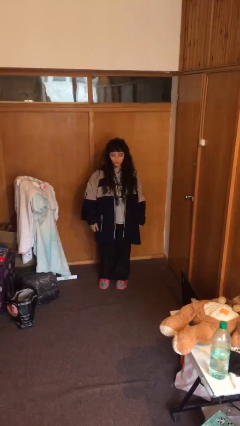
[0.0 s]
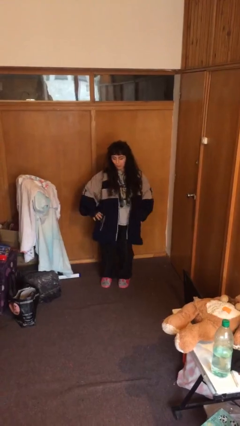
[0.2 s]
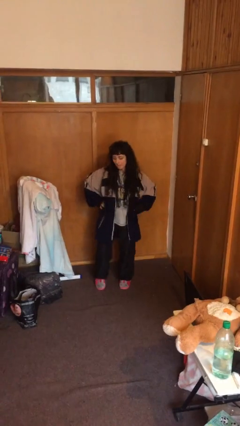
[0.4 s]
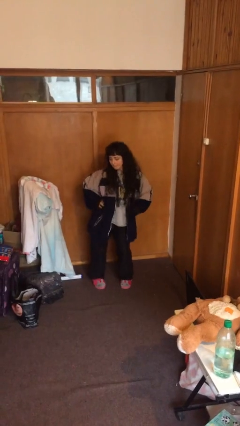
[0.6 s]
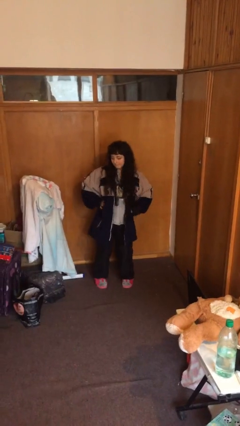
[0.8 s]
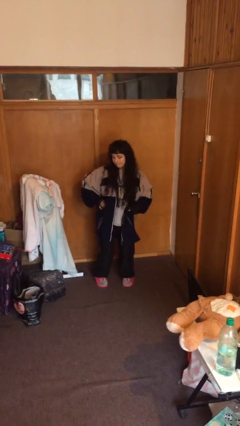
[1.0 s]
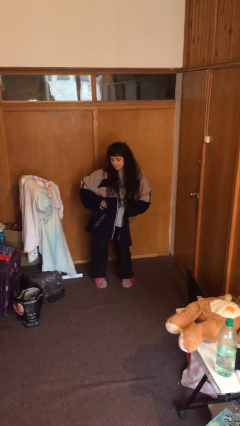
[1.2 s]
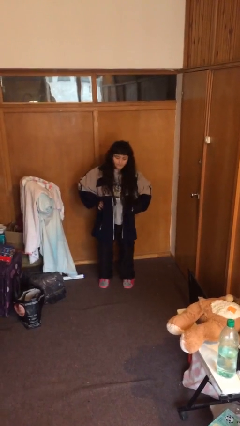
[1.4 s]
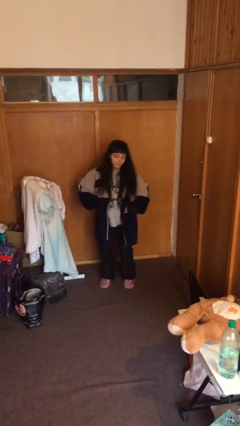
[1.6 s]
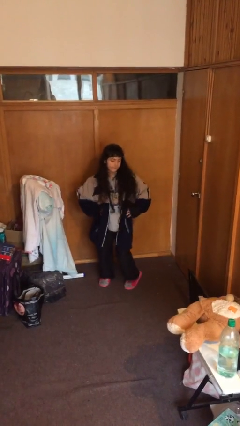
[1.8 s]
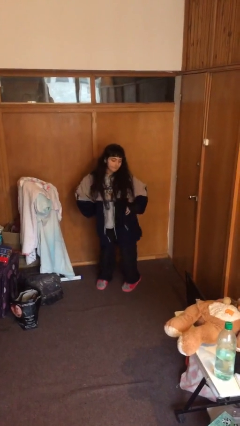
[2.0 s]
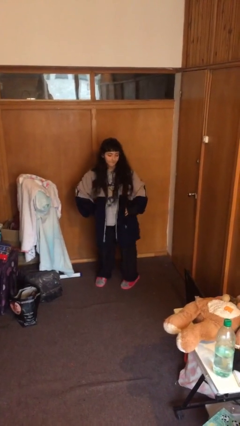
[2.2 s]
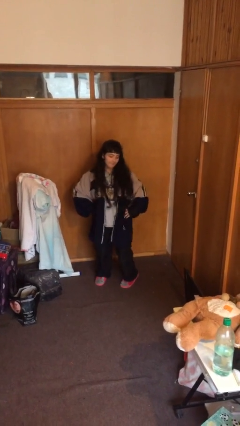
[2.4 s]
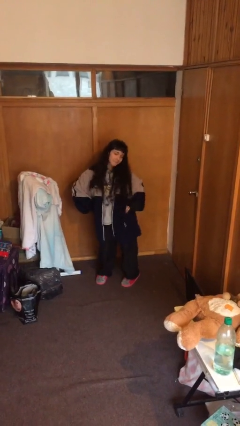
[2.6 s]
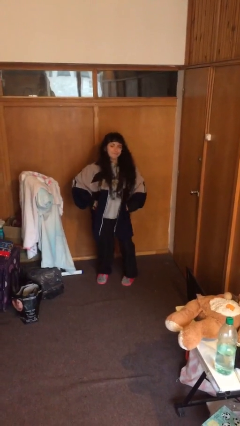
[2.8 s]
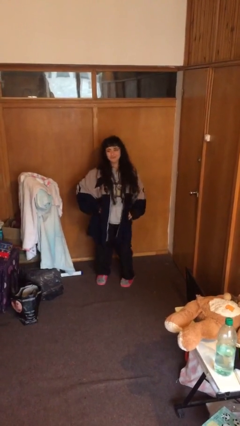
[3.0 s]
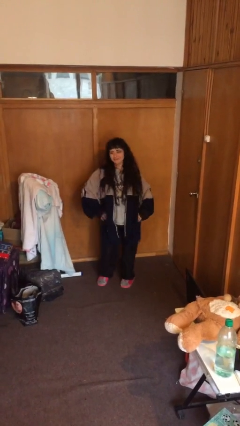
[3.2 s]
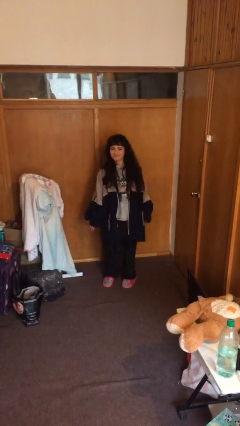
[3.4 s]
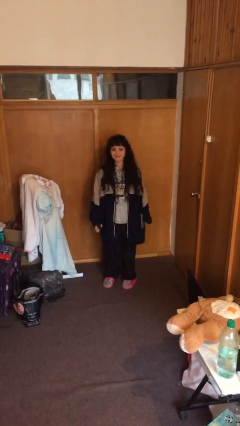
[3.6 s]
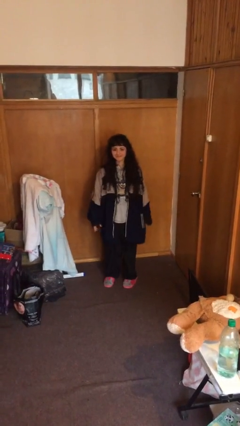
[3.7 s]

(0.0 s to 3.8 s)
person dances in place

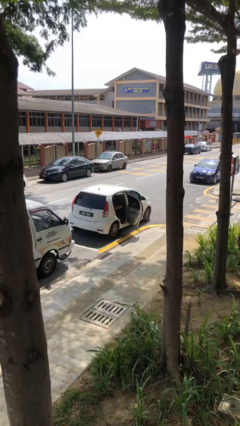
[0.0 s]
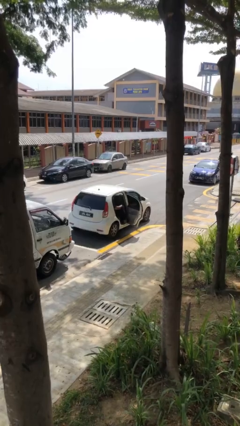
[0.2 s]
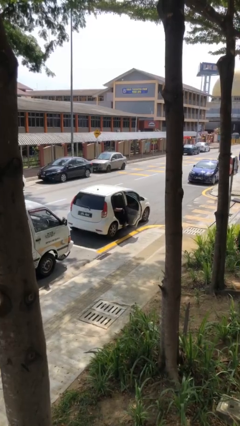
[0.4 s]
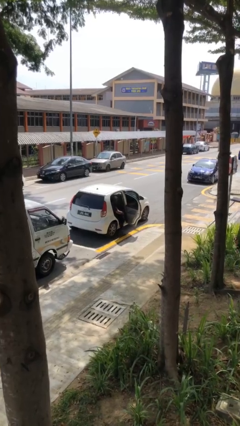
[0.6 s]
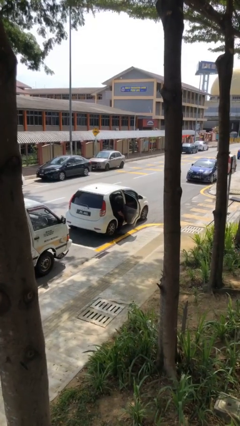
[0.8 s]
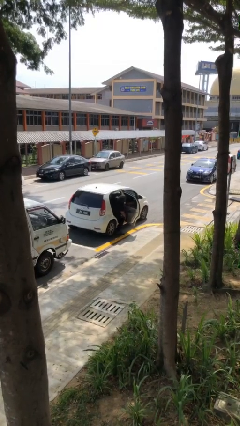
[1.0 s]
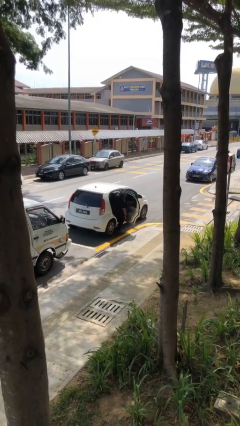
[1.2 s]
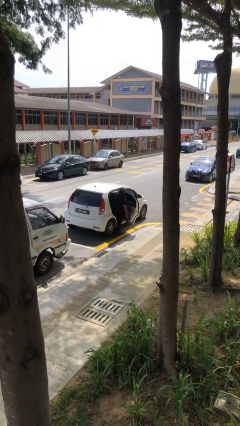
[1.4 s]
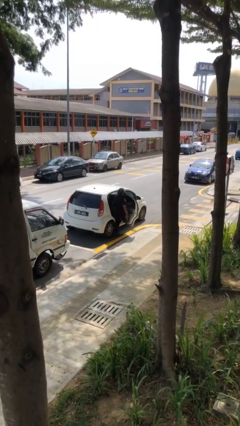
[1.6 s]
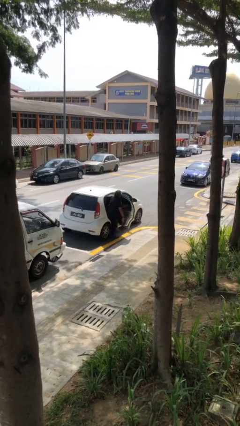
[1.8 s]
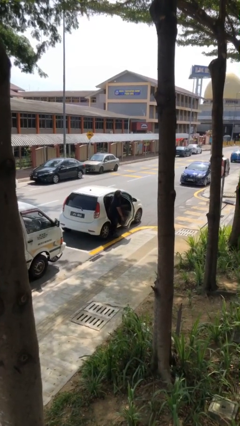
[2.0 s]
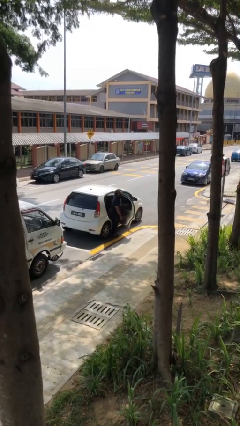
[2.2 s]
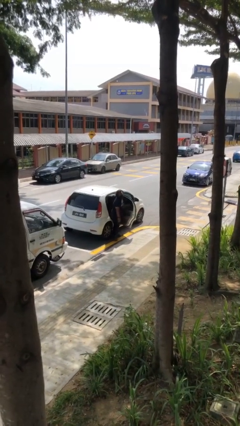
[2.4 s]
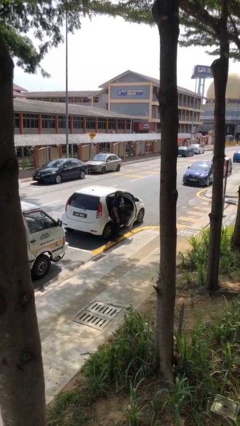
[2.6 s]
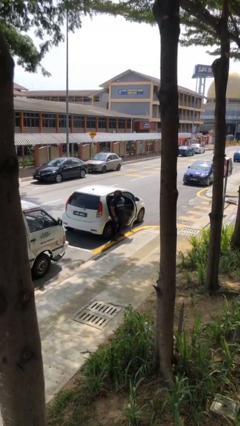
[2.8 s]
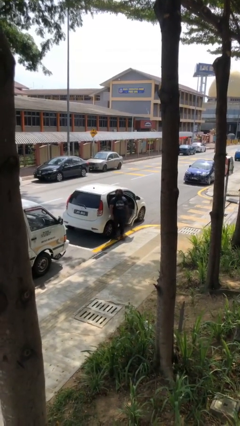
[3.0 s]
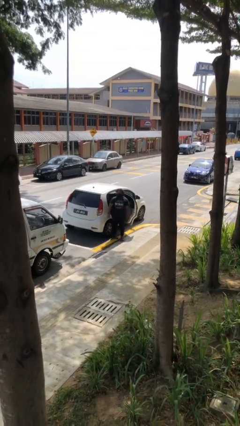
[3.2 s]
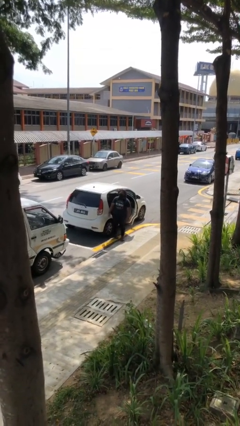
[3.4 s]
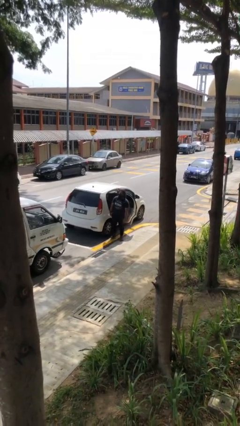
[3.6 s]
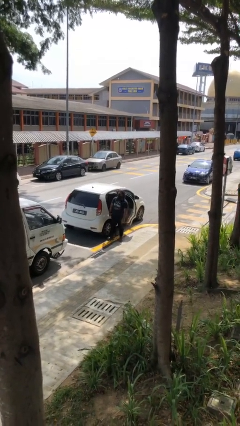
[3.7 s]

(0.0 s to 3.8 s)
person exits car

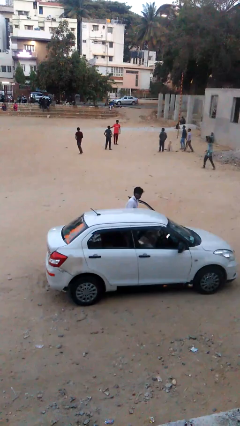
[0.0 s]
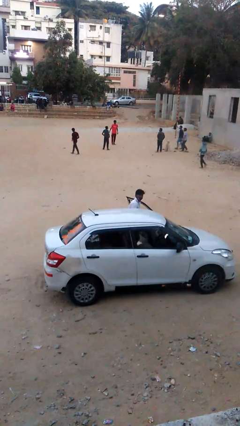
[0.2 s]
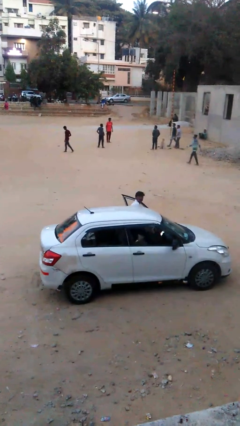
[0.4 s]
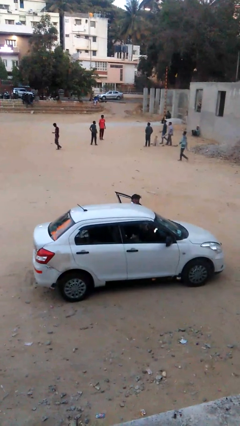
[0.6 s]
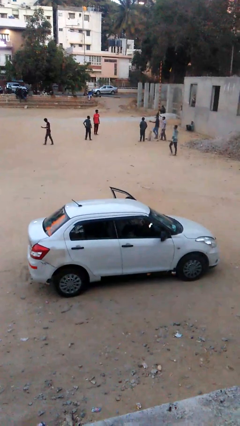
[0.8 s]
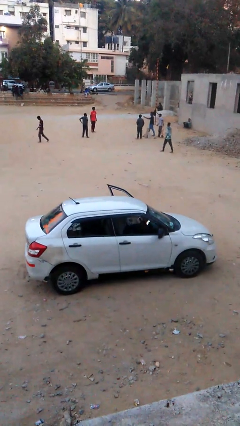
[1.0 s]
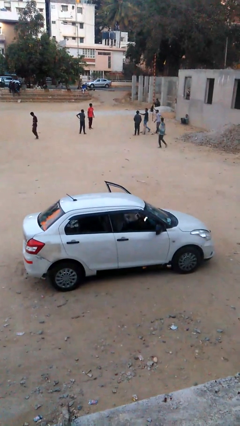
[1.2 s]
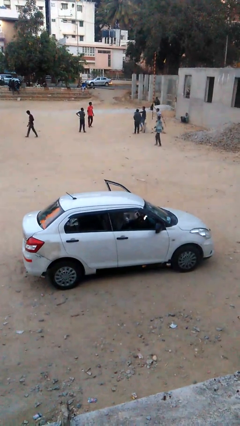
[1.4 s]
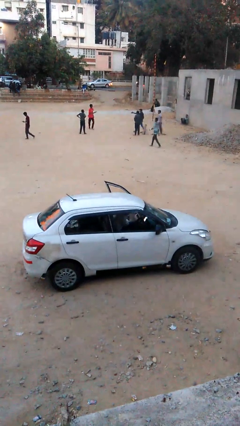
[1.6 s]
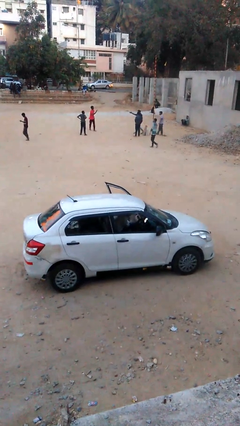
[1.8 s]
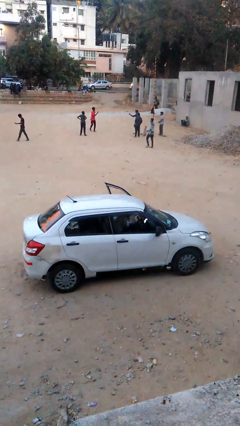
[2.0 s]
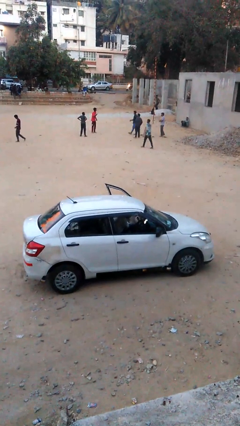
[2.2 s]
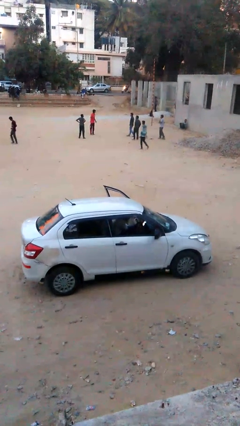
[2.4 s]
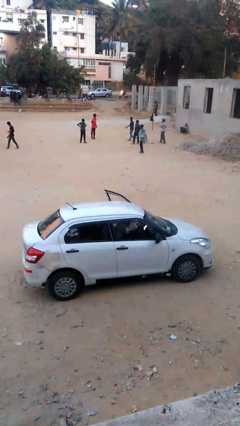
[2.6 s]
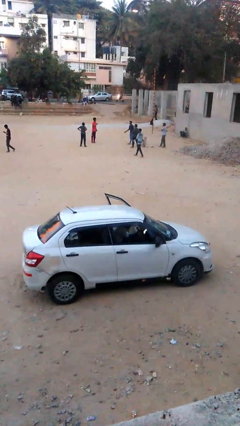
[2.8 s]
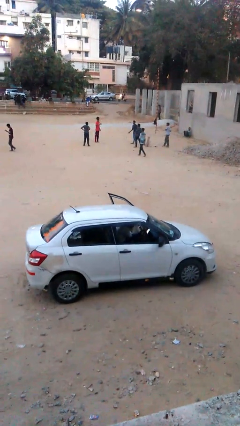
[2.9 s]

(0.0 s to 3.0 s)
person enters car

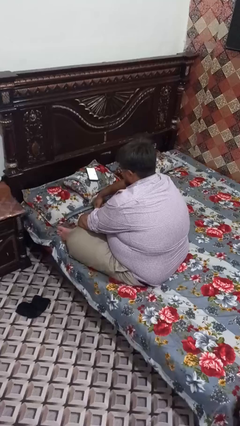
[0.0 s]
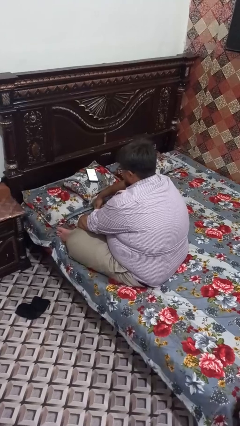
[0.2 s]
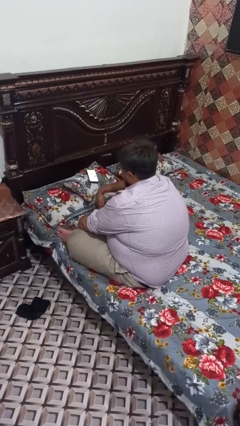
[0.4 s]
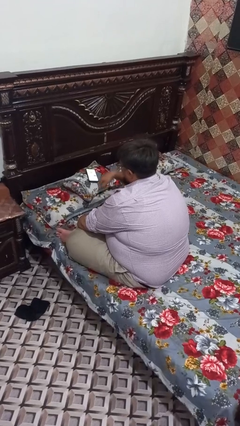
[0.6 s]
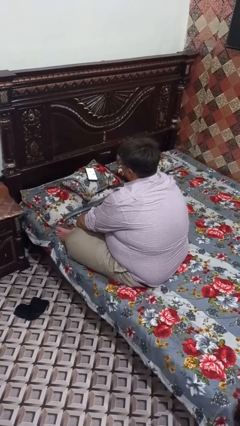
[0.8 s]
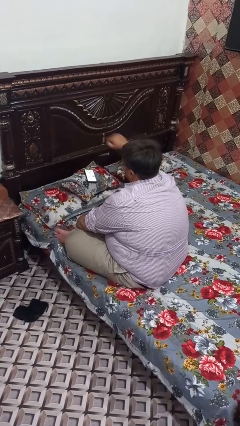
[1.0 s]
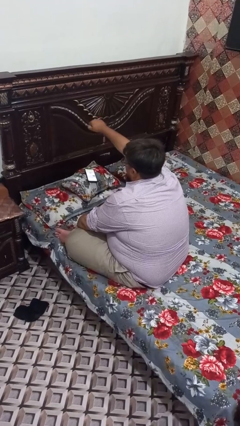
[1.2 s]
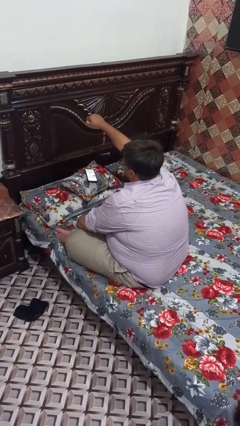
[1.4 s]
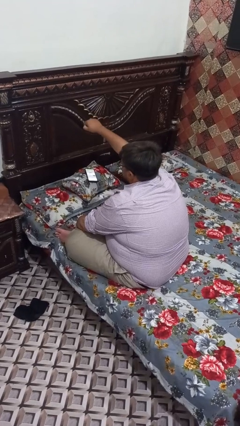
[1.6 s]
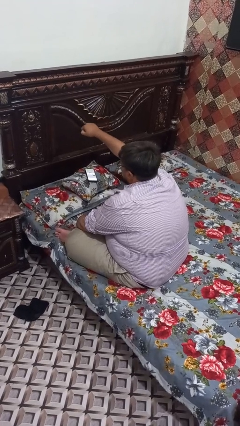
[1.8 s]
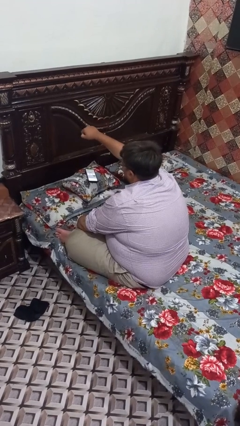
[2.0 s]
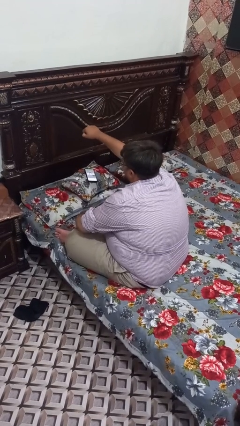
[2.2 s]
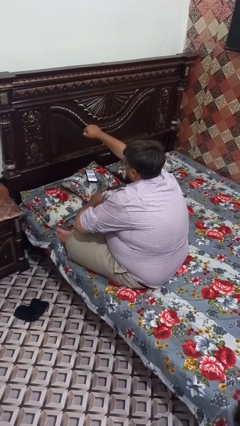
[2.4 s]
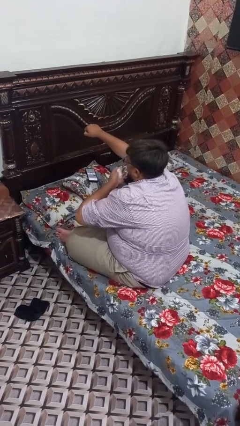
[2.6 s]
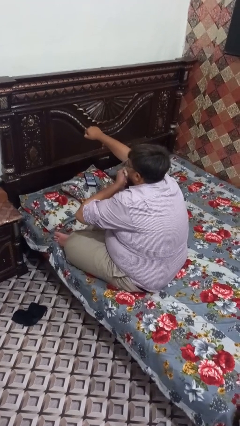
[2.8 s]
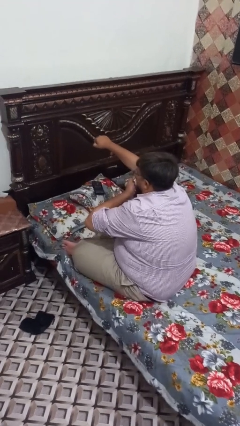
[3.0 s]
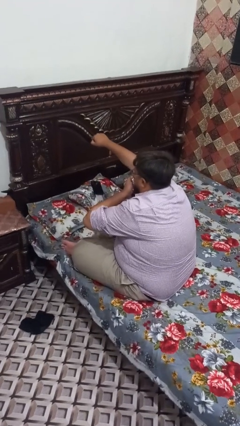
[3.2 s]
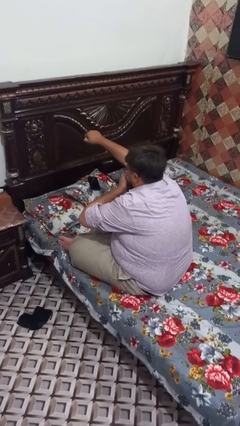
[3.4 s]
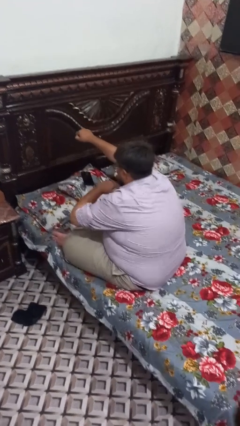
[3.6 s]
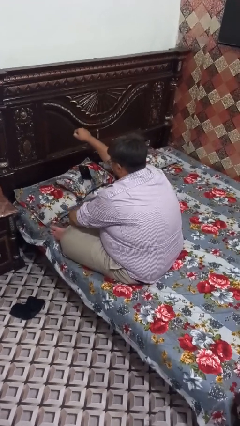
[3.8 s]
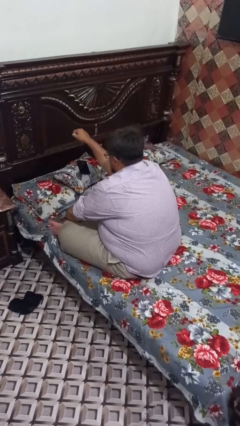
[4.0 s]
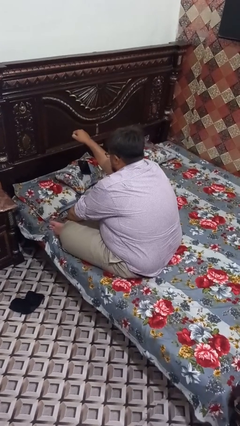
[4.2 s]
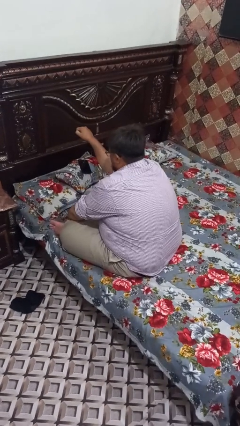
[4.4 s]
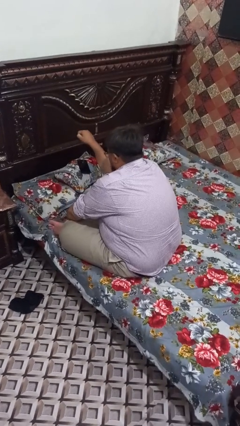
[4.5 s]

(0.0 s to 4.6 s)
person punches

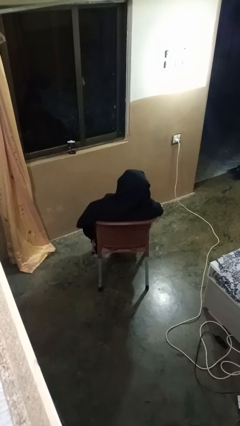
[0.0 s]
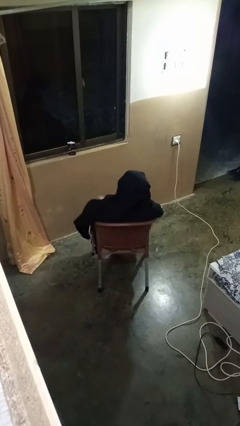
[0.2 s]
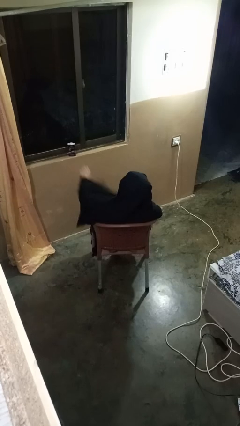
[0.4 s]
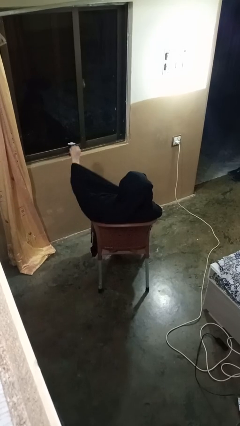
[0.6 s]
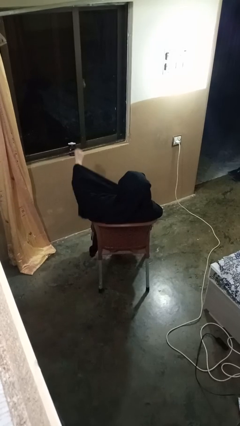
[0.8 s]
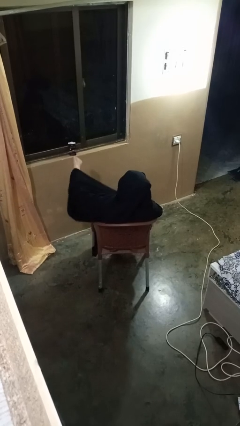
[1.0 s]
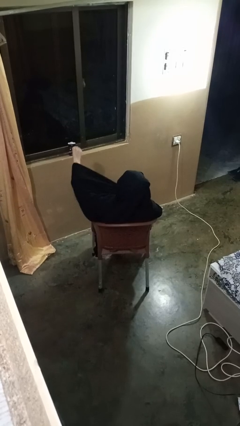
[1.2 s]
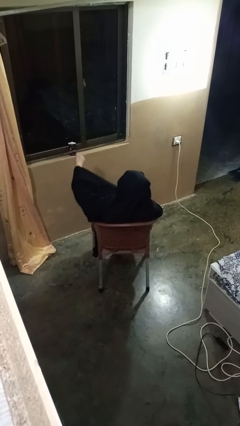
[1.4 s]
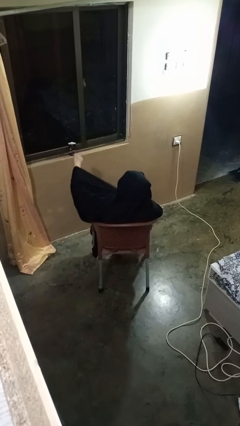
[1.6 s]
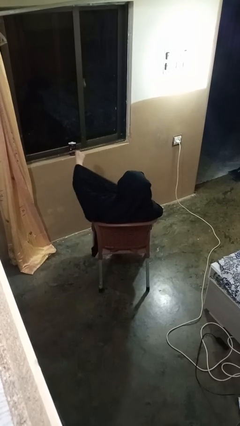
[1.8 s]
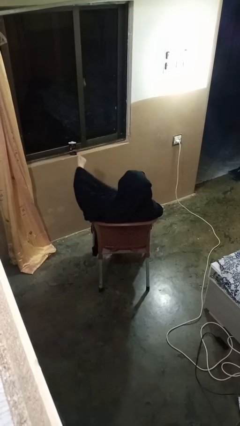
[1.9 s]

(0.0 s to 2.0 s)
person gestures thumbs down

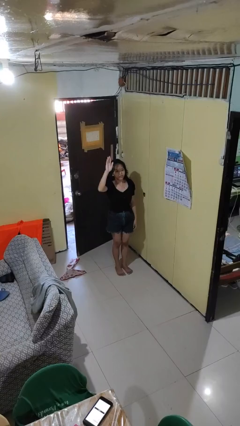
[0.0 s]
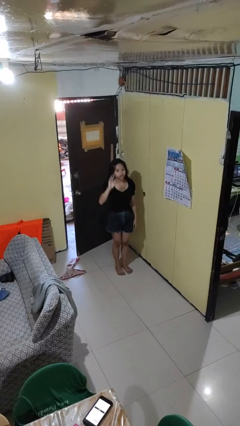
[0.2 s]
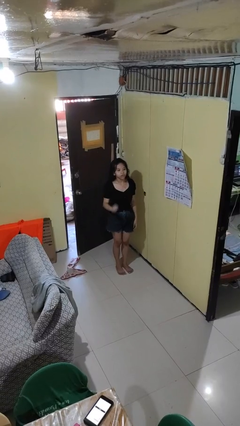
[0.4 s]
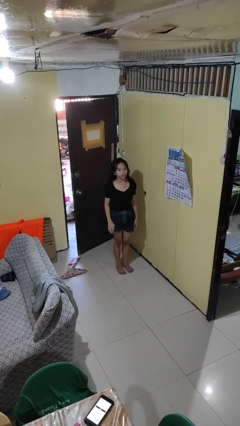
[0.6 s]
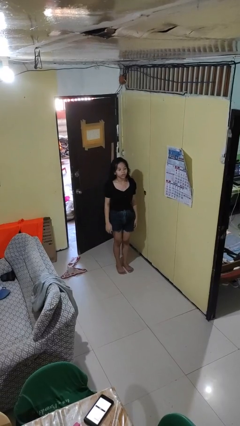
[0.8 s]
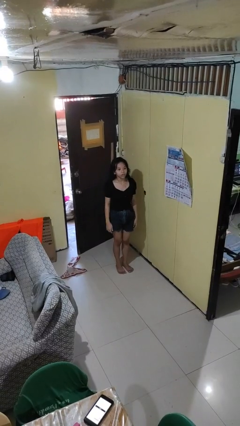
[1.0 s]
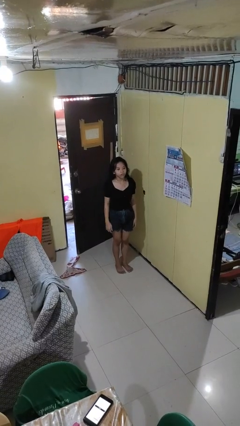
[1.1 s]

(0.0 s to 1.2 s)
person gestures lower hand
